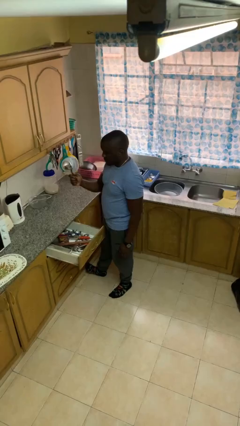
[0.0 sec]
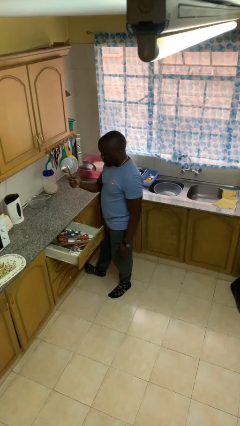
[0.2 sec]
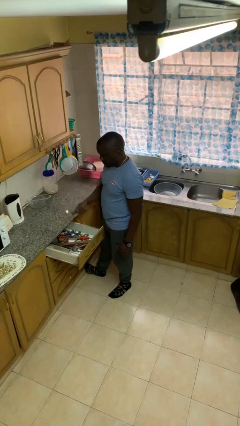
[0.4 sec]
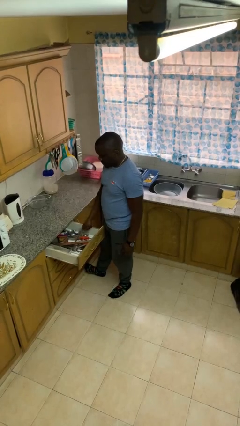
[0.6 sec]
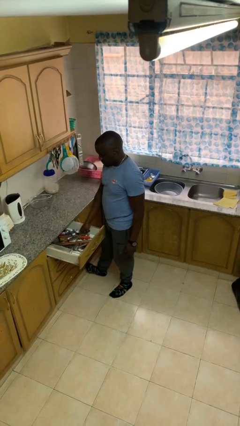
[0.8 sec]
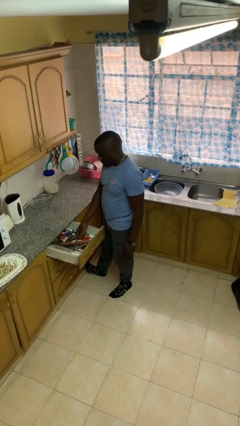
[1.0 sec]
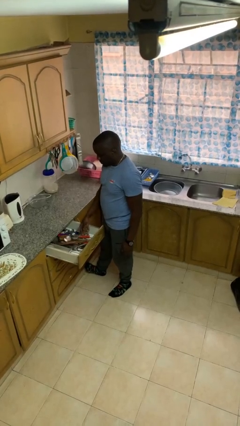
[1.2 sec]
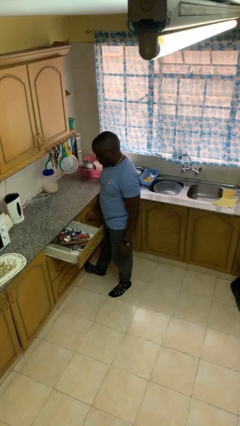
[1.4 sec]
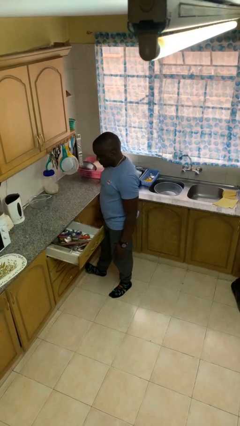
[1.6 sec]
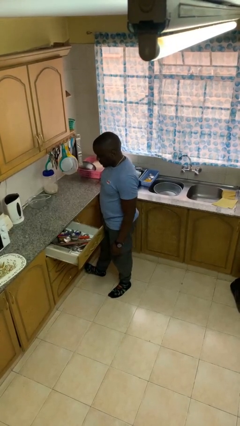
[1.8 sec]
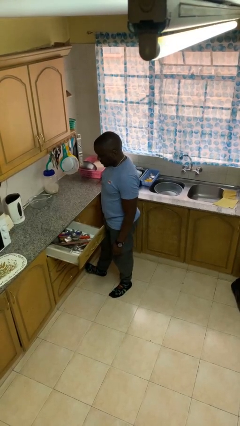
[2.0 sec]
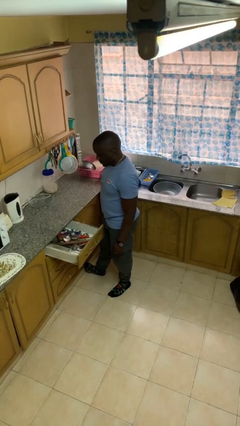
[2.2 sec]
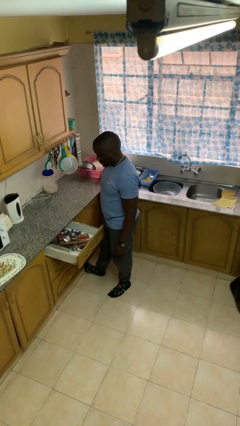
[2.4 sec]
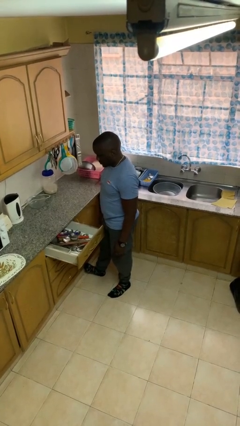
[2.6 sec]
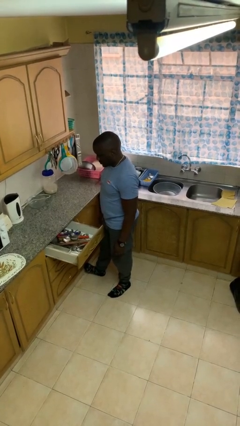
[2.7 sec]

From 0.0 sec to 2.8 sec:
person puts object into kitchen drawer

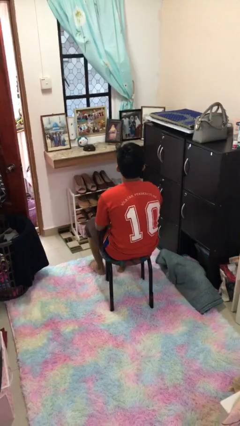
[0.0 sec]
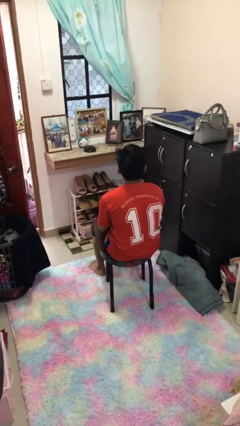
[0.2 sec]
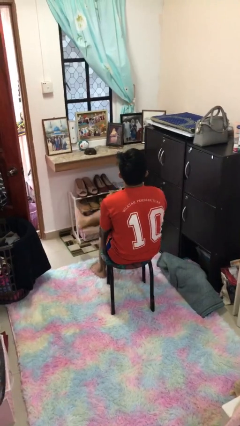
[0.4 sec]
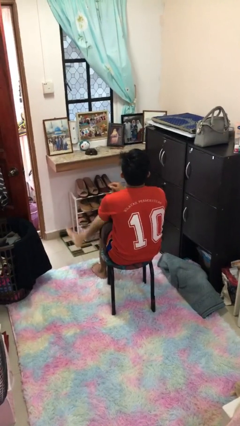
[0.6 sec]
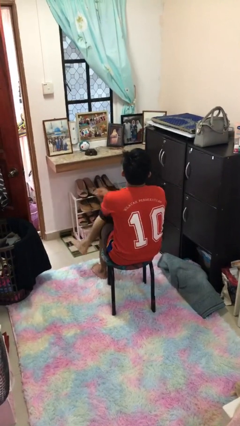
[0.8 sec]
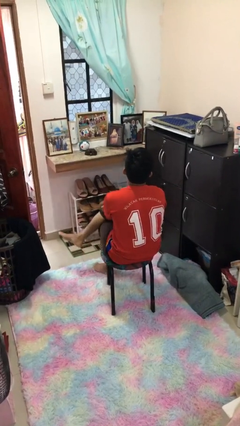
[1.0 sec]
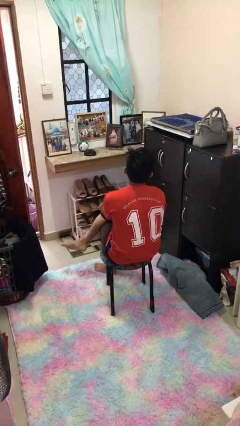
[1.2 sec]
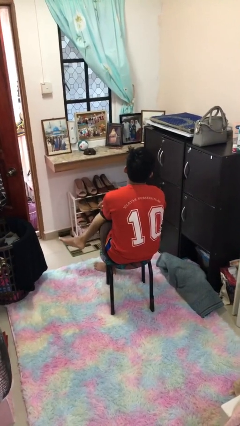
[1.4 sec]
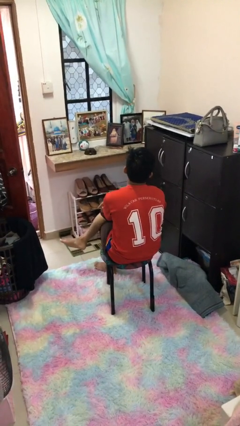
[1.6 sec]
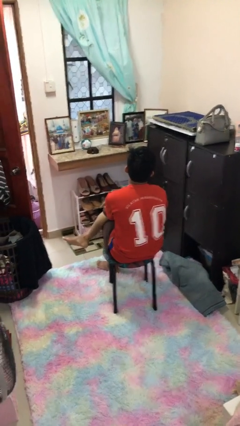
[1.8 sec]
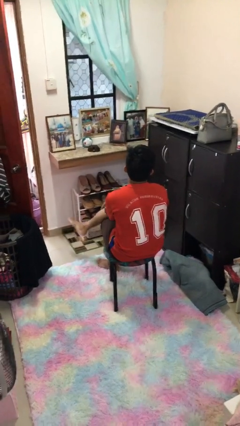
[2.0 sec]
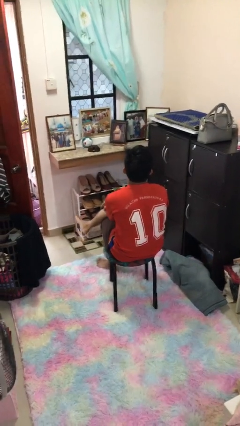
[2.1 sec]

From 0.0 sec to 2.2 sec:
person crosses legs

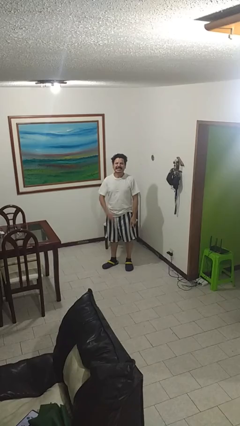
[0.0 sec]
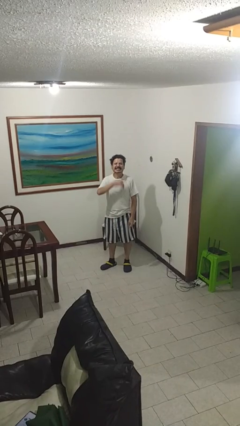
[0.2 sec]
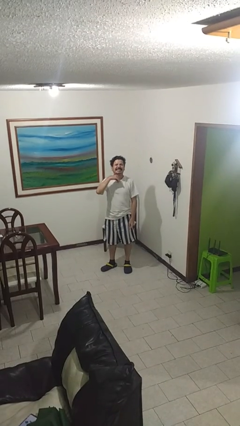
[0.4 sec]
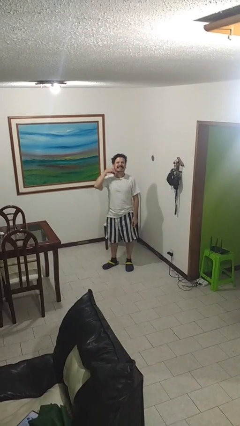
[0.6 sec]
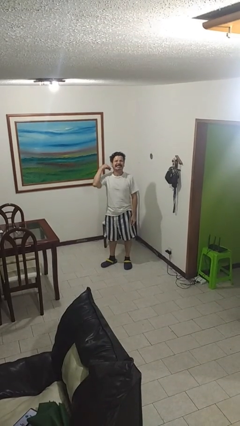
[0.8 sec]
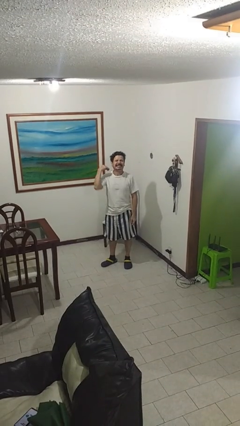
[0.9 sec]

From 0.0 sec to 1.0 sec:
person gestures cut

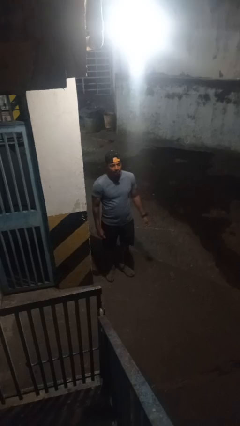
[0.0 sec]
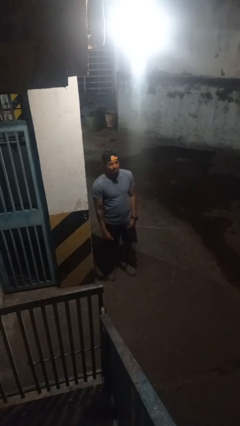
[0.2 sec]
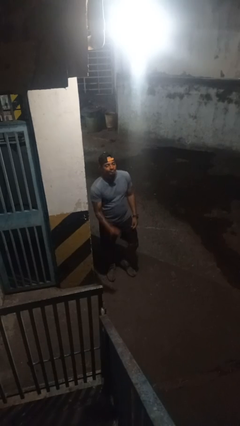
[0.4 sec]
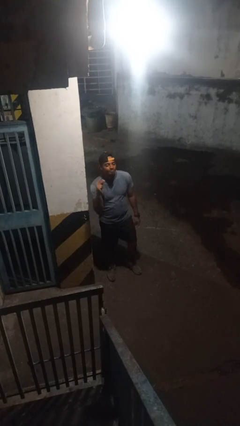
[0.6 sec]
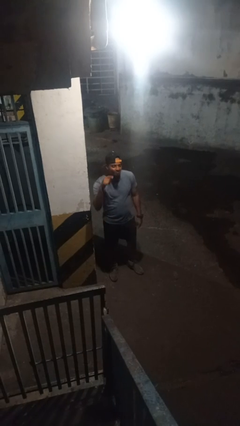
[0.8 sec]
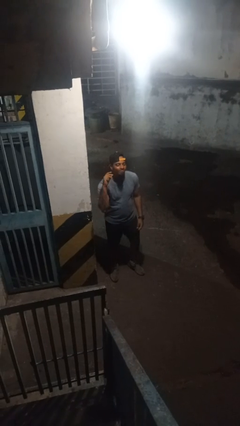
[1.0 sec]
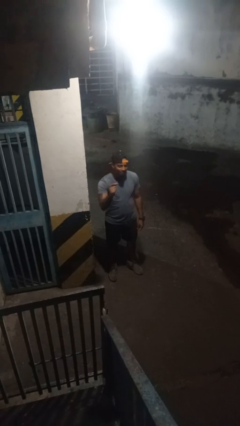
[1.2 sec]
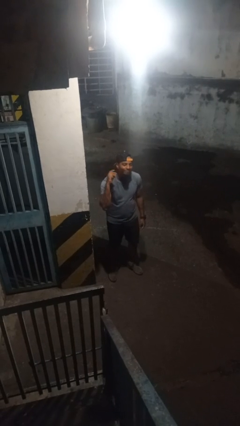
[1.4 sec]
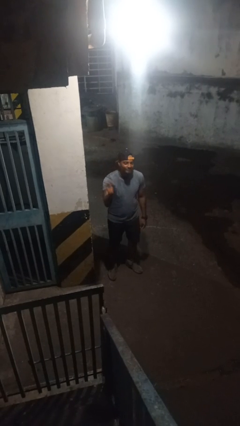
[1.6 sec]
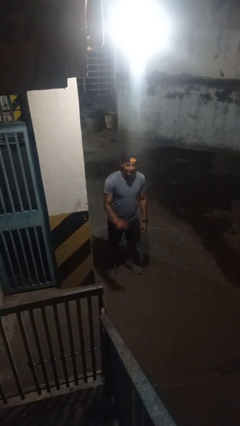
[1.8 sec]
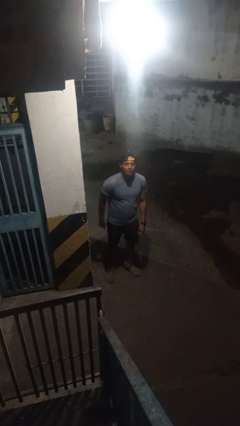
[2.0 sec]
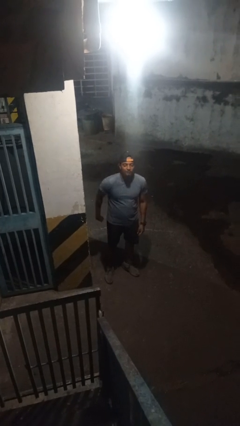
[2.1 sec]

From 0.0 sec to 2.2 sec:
person snaps fingers

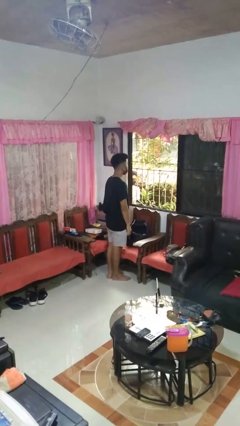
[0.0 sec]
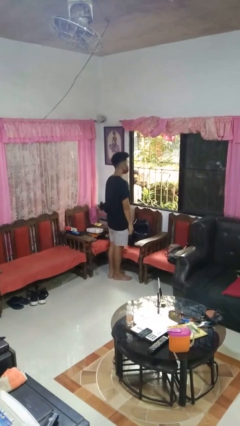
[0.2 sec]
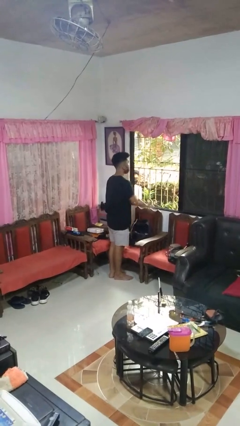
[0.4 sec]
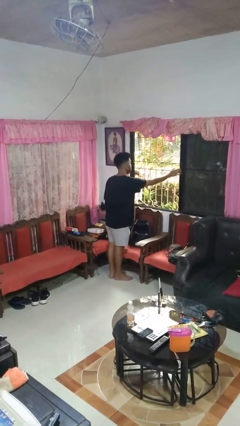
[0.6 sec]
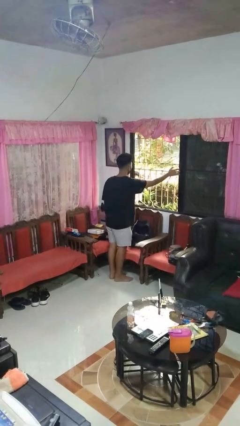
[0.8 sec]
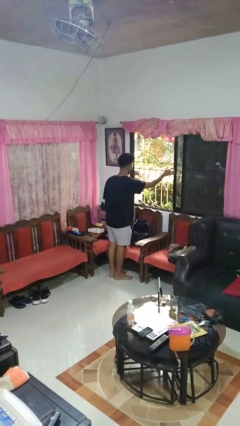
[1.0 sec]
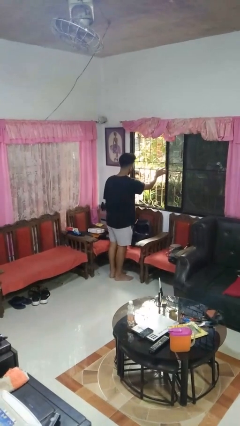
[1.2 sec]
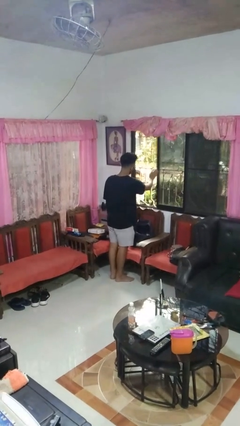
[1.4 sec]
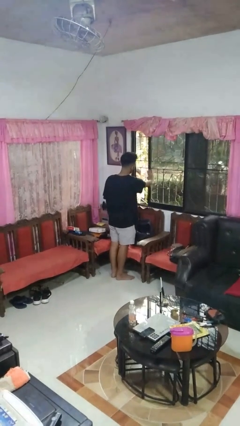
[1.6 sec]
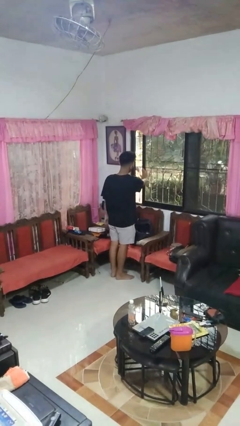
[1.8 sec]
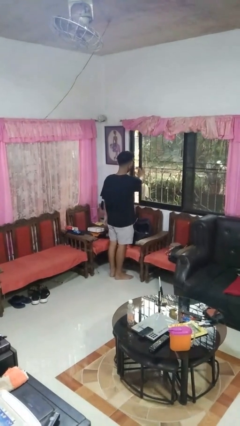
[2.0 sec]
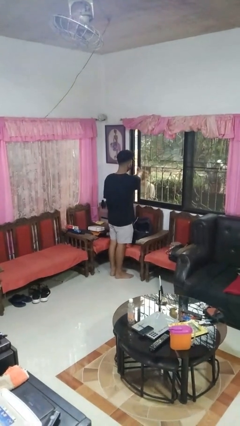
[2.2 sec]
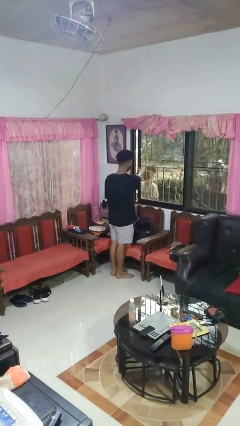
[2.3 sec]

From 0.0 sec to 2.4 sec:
person closes home window

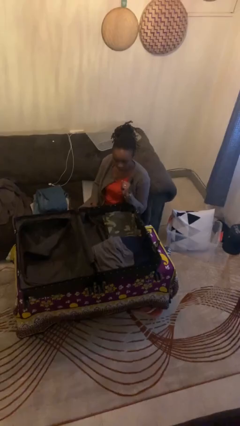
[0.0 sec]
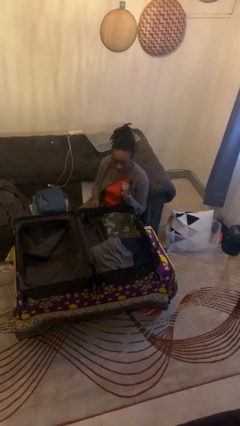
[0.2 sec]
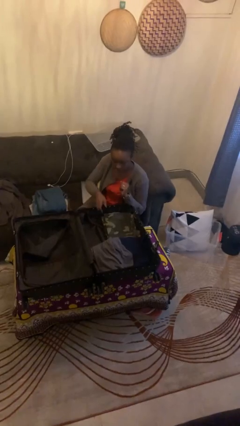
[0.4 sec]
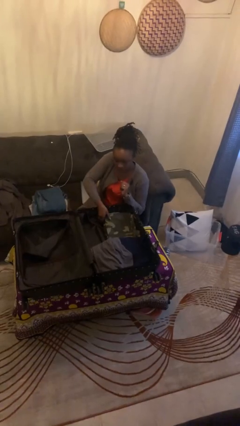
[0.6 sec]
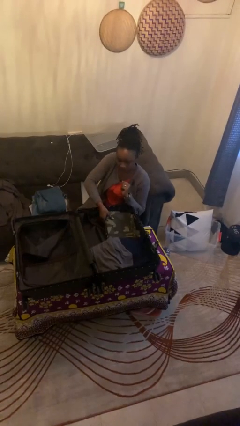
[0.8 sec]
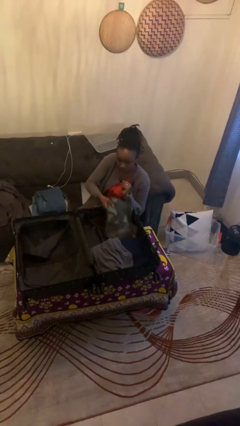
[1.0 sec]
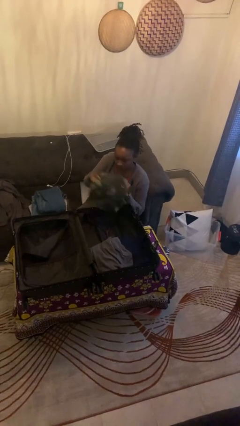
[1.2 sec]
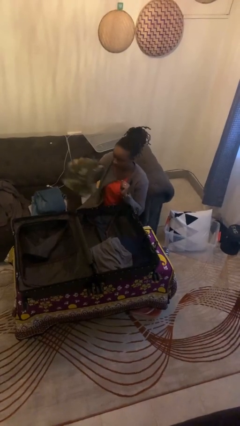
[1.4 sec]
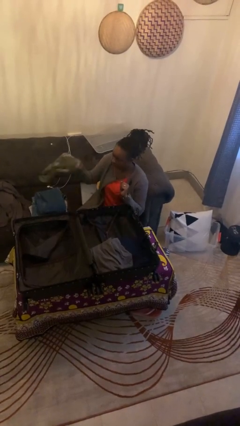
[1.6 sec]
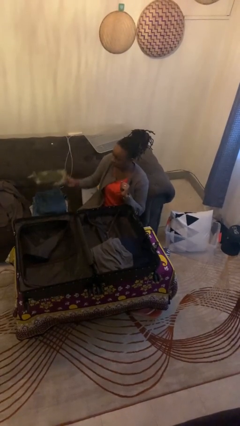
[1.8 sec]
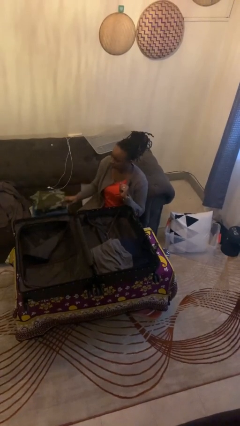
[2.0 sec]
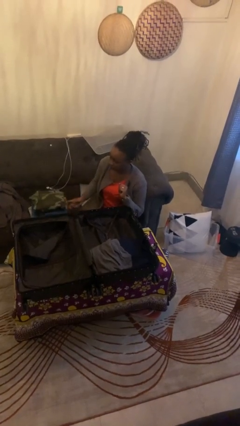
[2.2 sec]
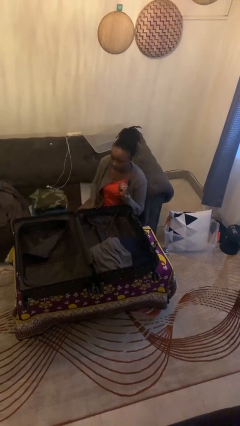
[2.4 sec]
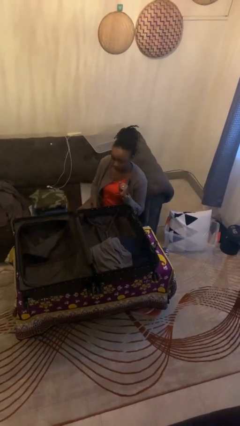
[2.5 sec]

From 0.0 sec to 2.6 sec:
person unloads clothes from suitcase

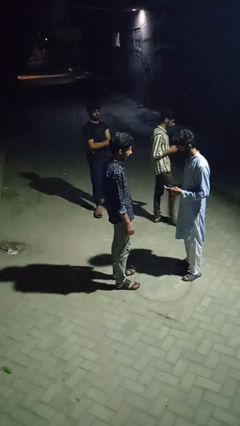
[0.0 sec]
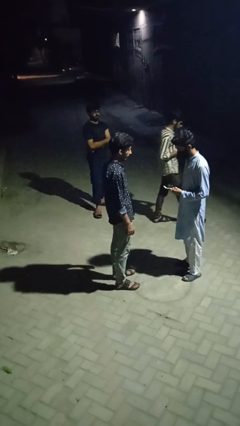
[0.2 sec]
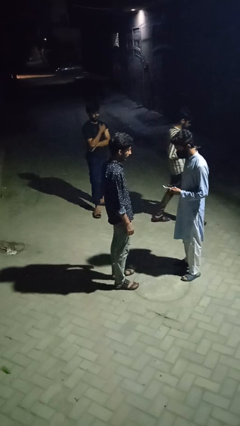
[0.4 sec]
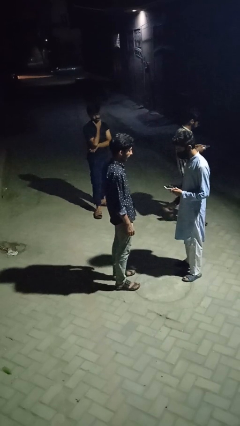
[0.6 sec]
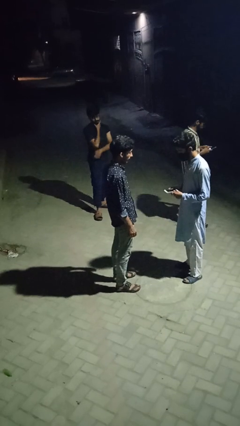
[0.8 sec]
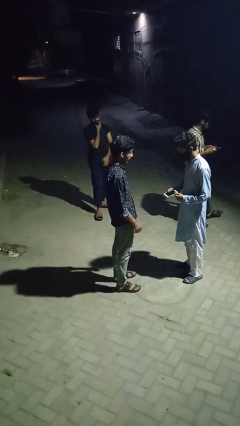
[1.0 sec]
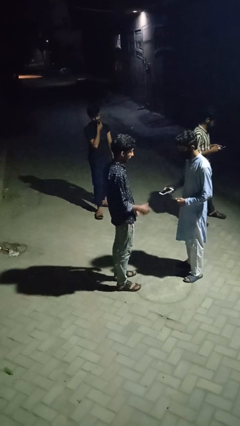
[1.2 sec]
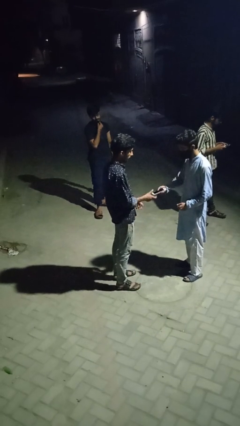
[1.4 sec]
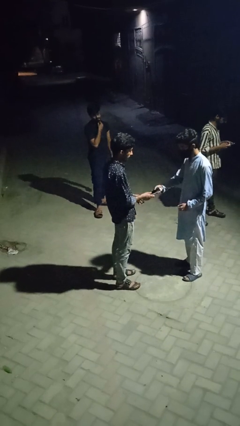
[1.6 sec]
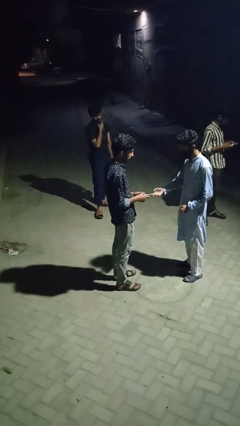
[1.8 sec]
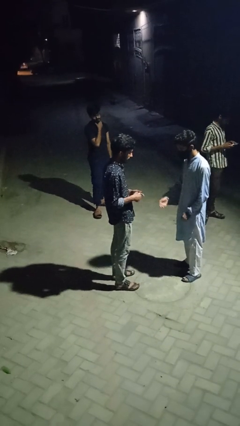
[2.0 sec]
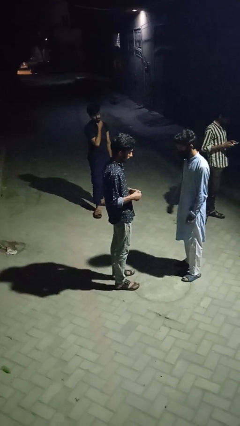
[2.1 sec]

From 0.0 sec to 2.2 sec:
person transfers object to person

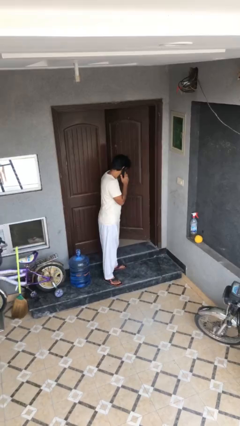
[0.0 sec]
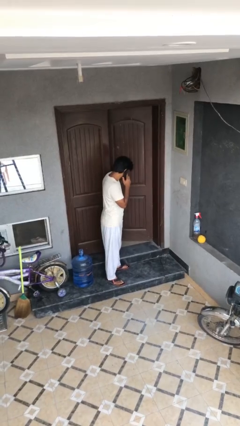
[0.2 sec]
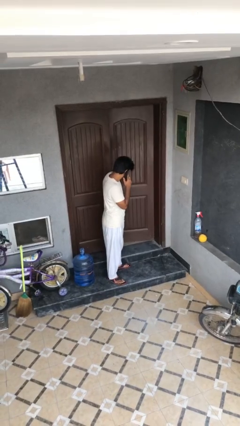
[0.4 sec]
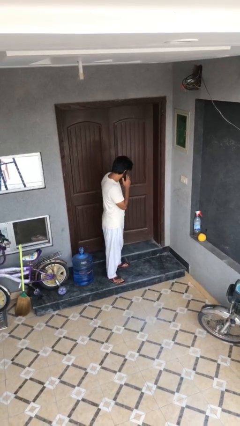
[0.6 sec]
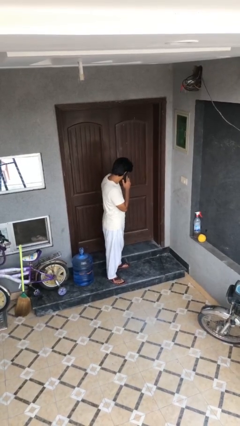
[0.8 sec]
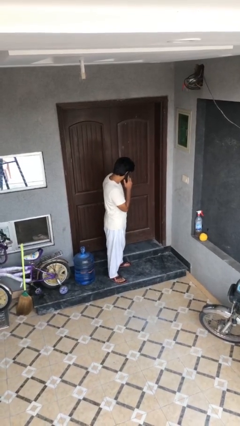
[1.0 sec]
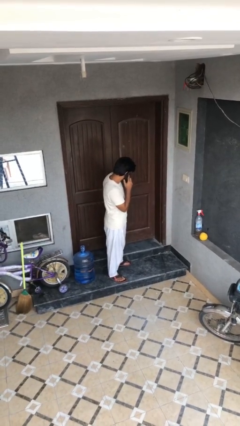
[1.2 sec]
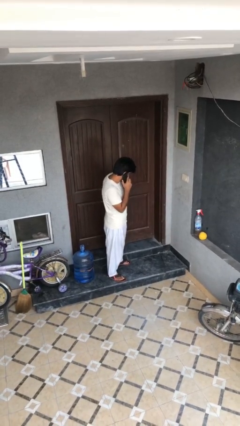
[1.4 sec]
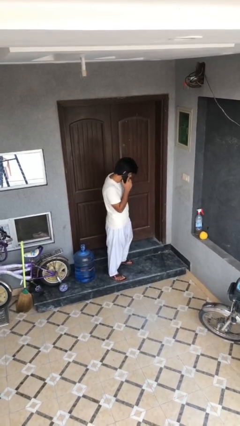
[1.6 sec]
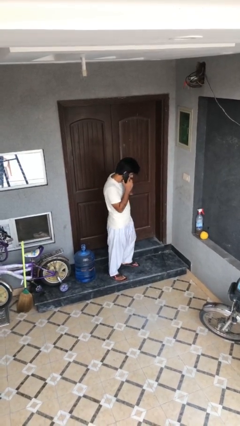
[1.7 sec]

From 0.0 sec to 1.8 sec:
person closes facility door
